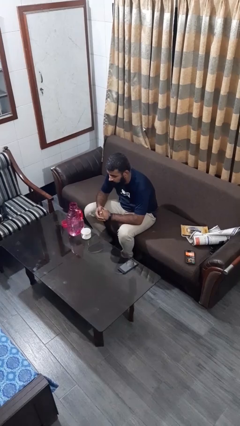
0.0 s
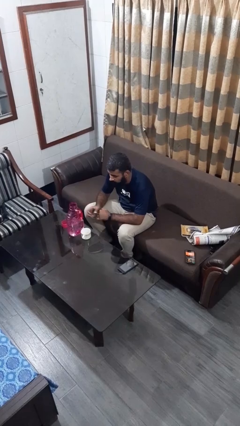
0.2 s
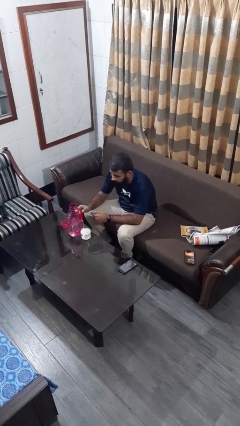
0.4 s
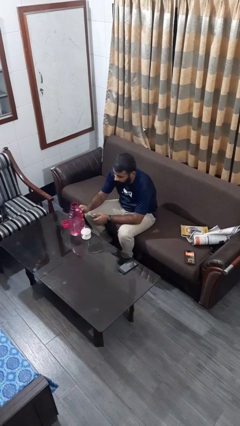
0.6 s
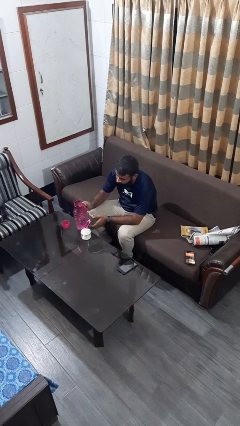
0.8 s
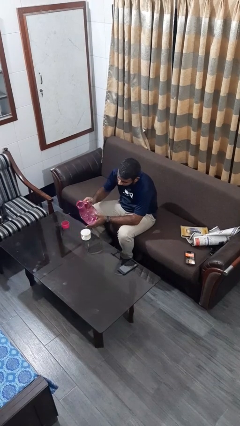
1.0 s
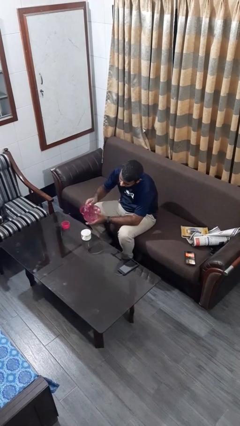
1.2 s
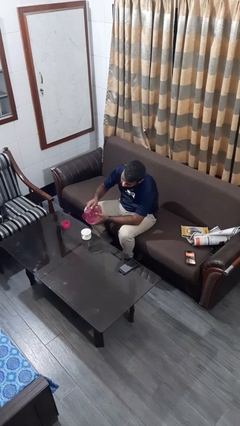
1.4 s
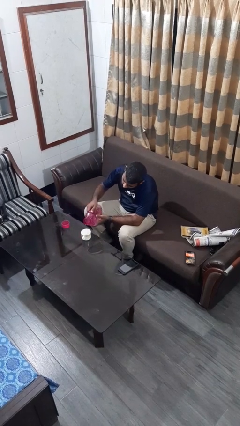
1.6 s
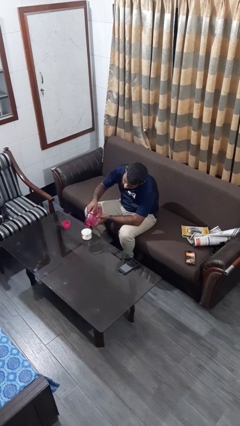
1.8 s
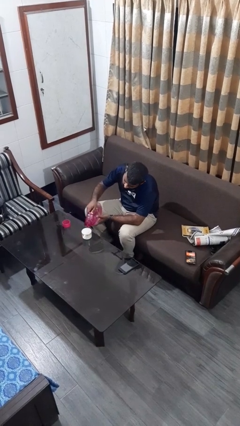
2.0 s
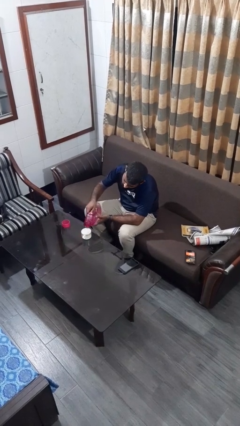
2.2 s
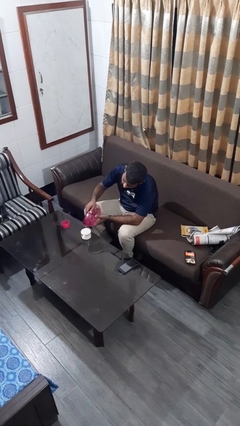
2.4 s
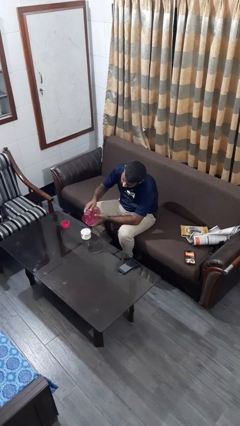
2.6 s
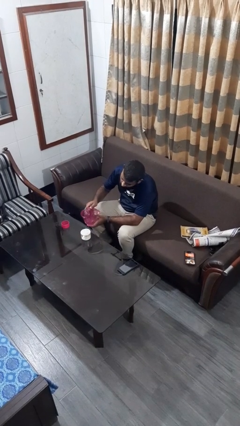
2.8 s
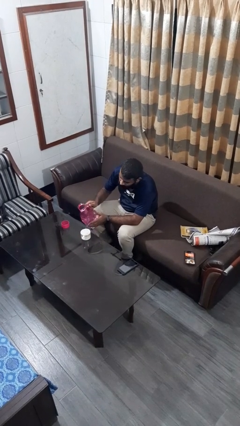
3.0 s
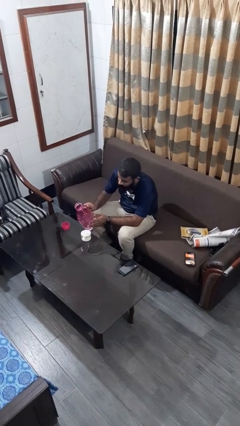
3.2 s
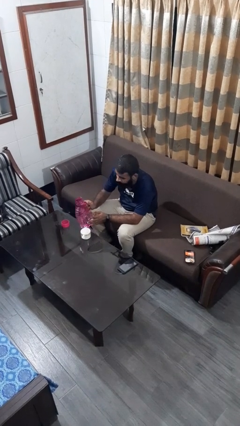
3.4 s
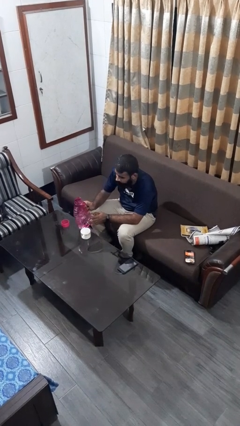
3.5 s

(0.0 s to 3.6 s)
person pours liquid into cup

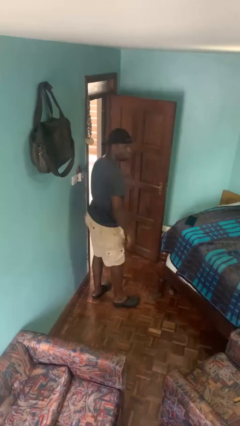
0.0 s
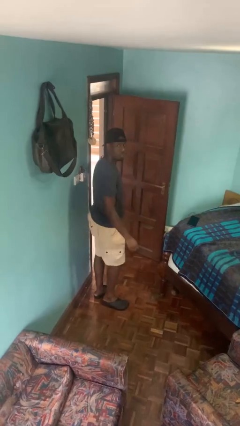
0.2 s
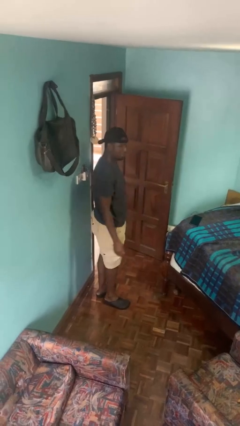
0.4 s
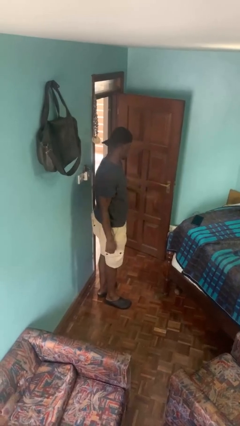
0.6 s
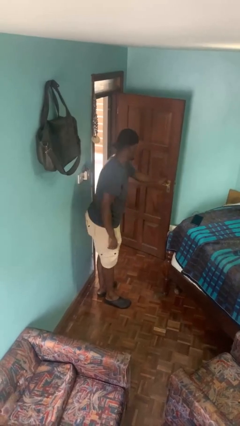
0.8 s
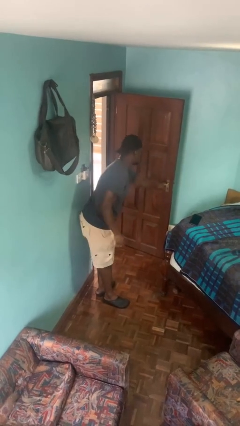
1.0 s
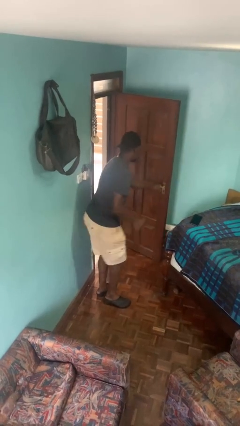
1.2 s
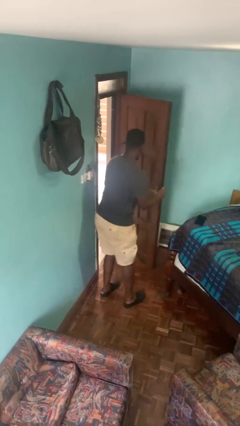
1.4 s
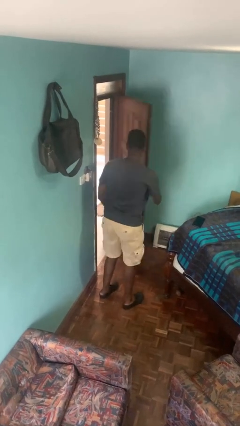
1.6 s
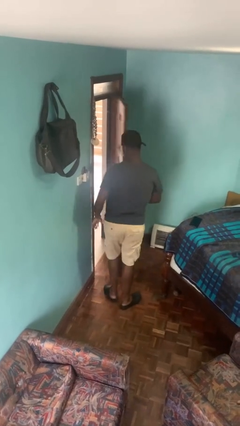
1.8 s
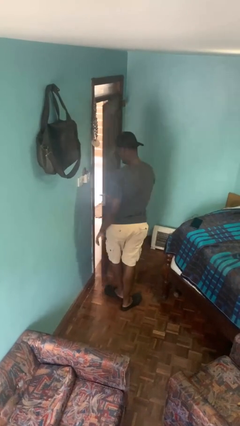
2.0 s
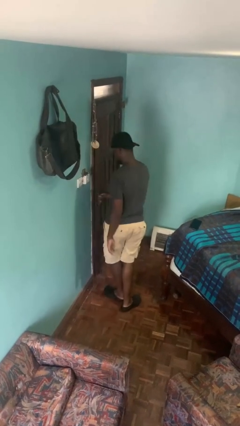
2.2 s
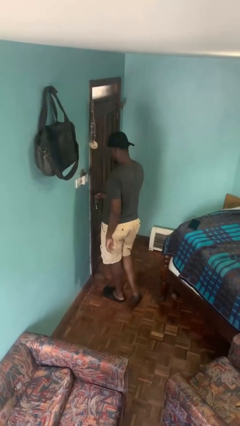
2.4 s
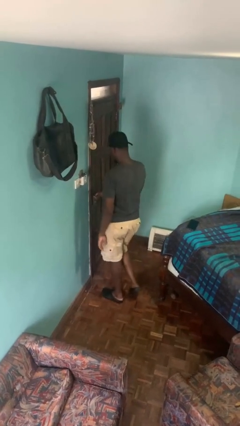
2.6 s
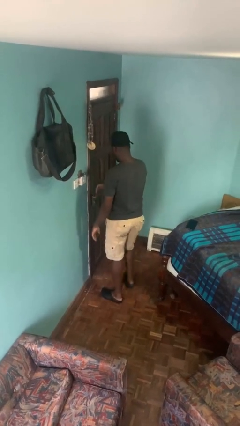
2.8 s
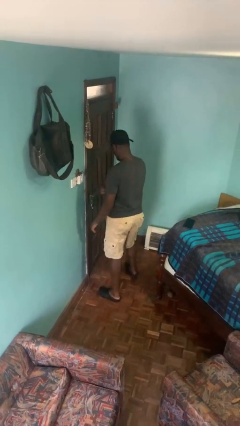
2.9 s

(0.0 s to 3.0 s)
person closes facility door

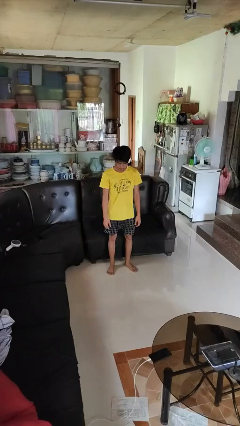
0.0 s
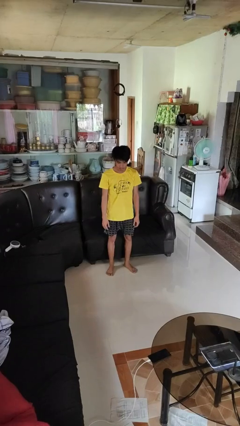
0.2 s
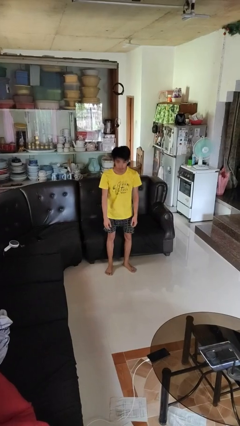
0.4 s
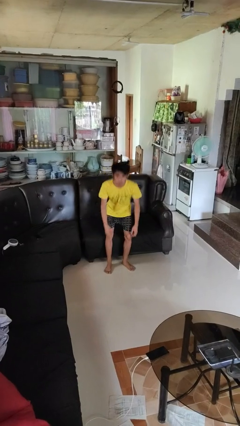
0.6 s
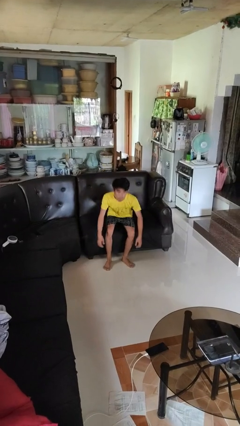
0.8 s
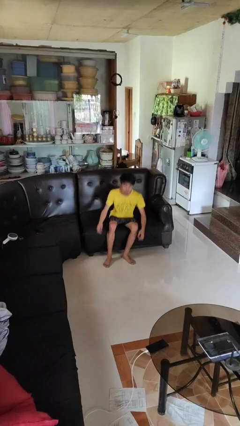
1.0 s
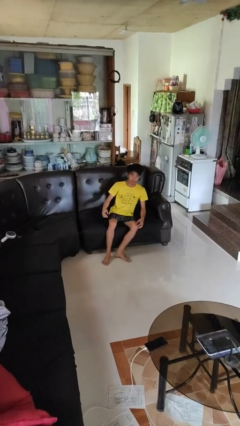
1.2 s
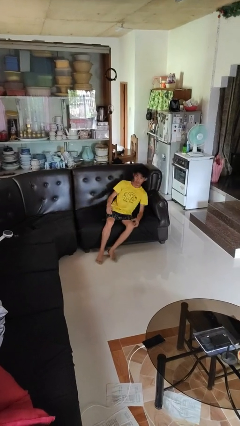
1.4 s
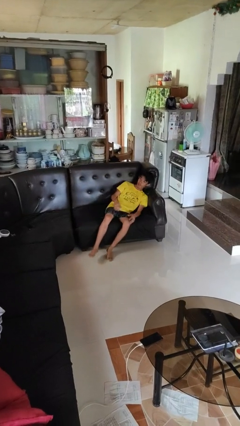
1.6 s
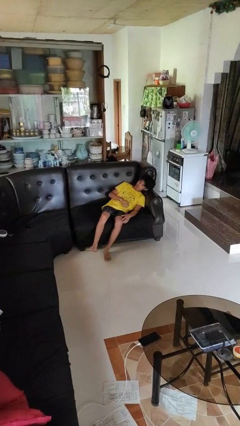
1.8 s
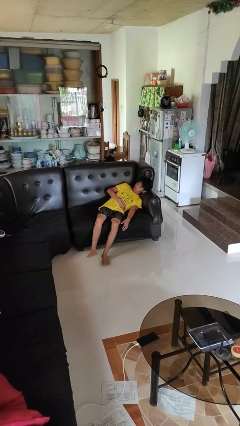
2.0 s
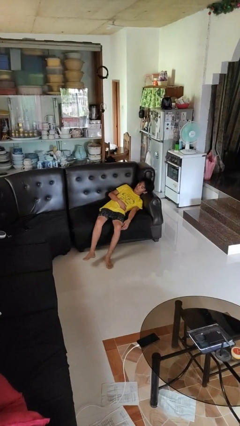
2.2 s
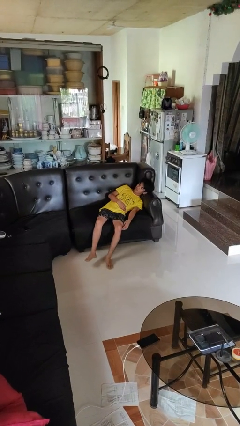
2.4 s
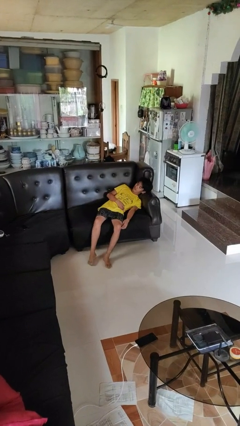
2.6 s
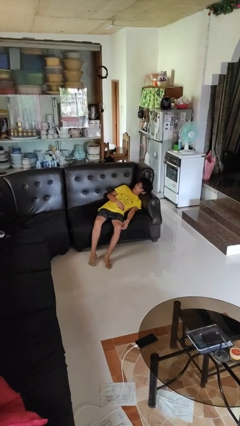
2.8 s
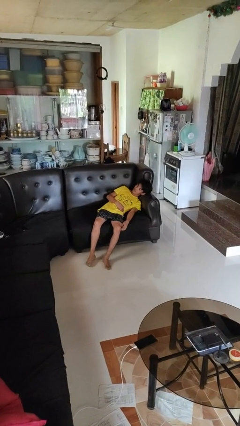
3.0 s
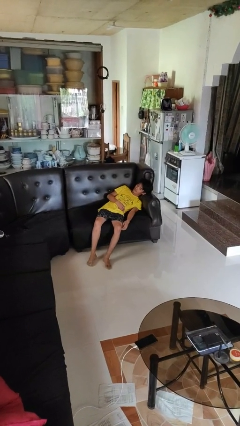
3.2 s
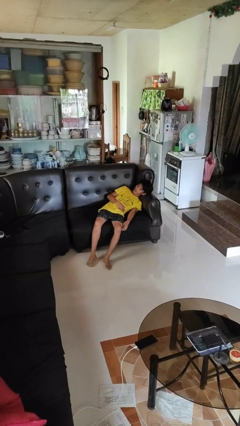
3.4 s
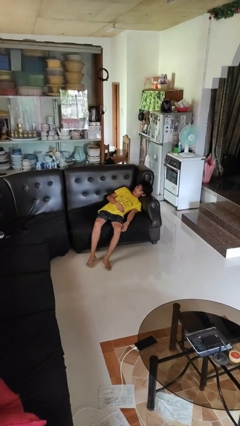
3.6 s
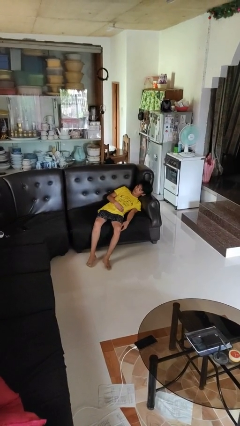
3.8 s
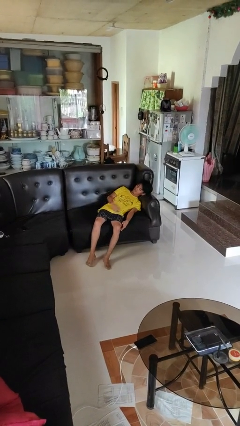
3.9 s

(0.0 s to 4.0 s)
person lies down on couch

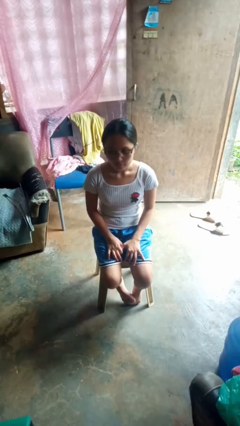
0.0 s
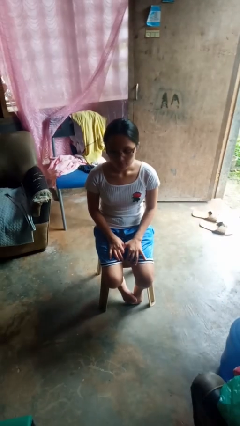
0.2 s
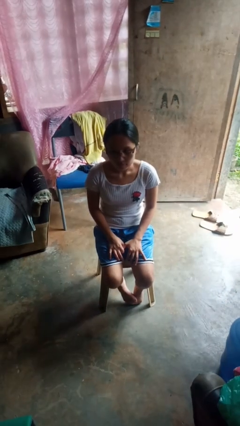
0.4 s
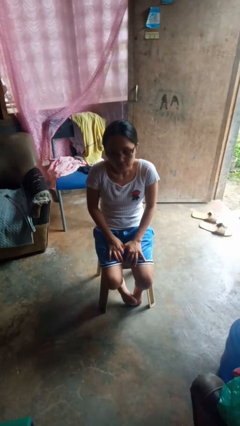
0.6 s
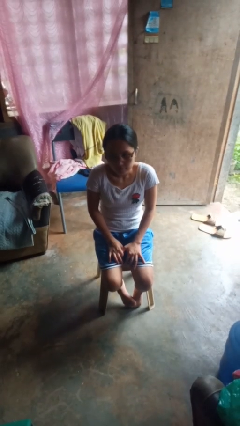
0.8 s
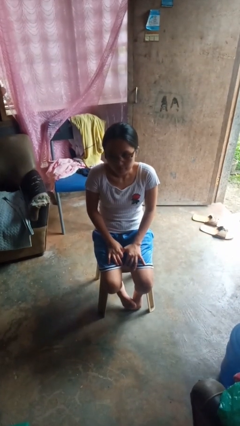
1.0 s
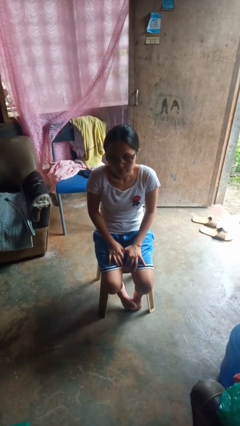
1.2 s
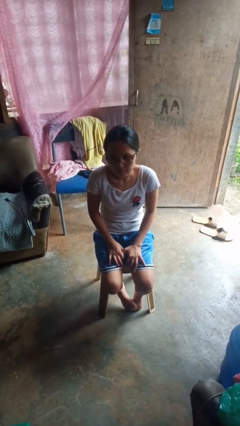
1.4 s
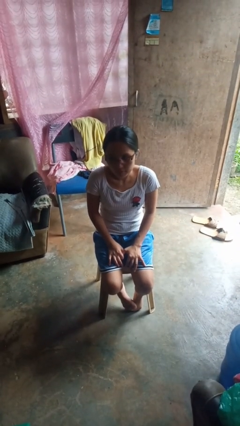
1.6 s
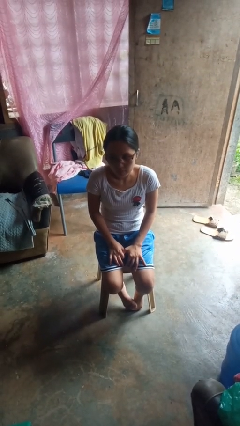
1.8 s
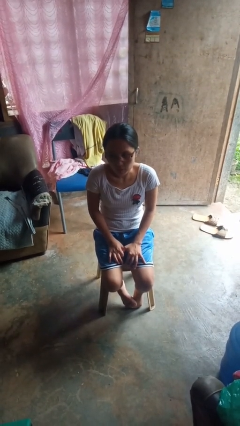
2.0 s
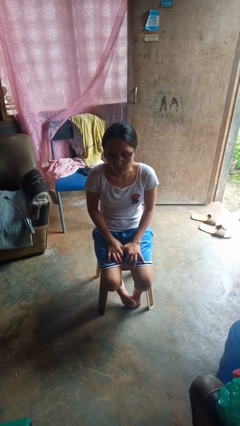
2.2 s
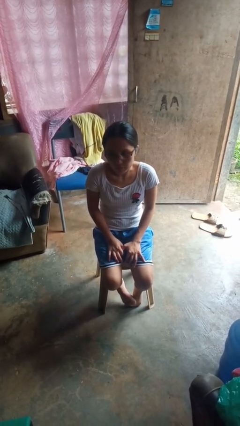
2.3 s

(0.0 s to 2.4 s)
person shrugs

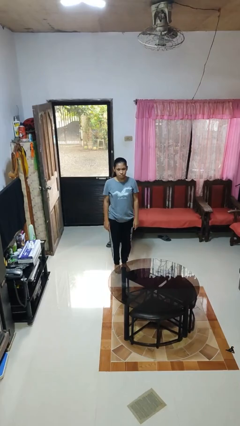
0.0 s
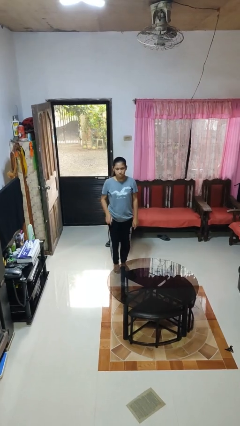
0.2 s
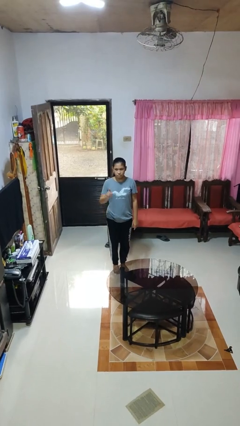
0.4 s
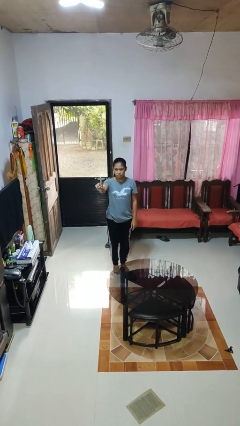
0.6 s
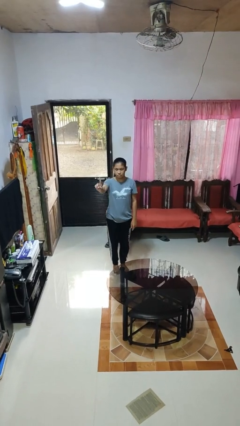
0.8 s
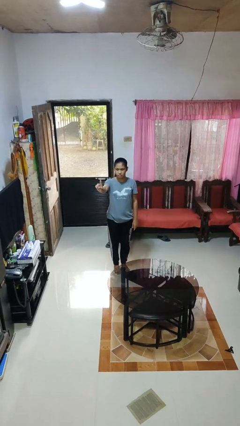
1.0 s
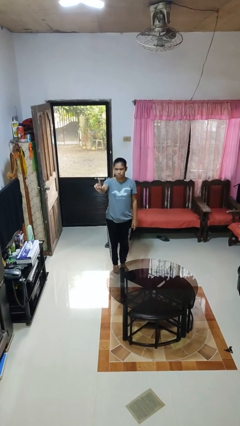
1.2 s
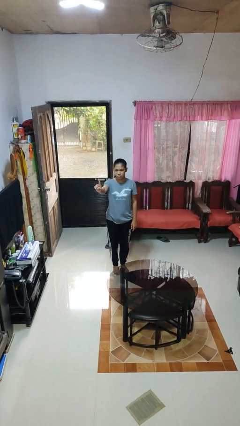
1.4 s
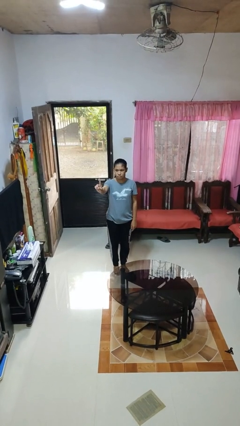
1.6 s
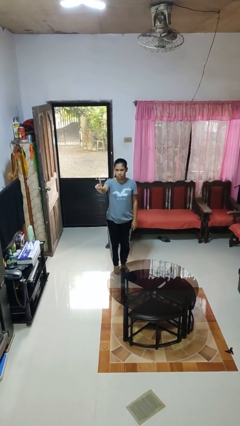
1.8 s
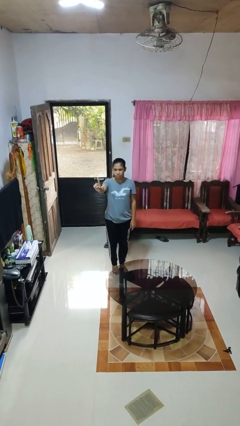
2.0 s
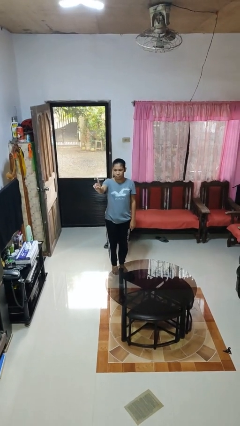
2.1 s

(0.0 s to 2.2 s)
person gestures number one

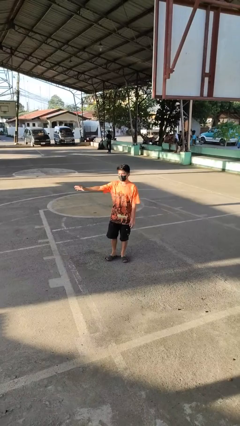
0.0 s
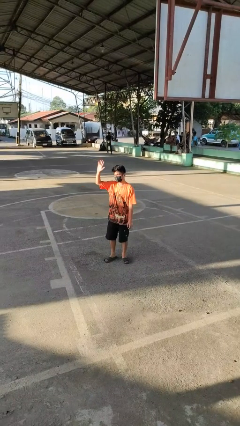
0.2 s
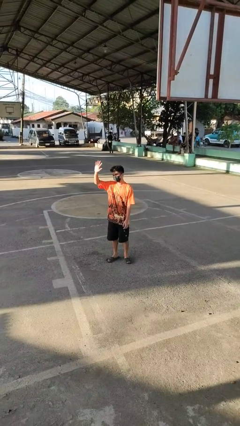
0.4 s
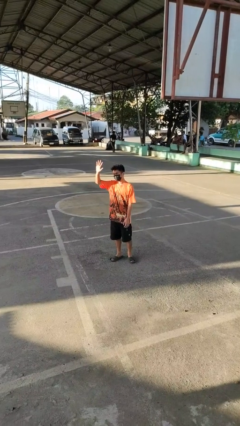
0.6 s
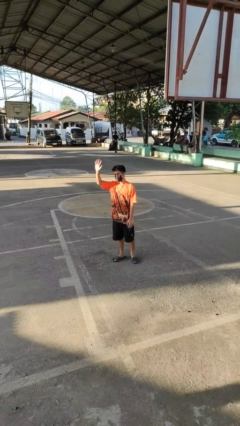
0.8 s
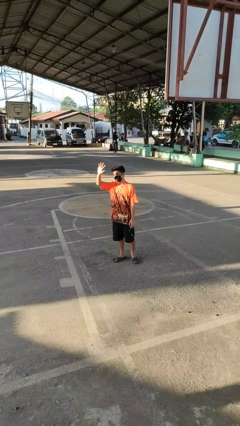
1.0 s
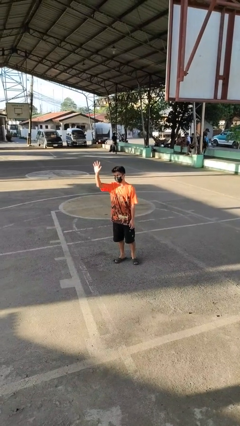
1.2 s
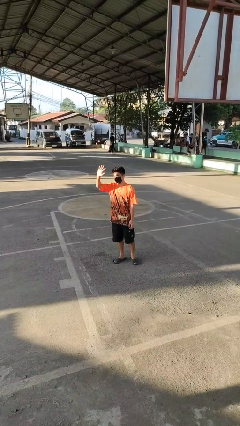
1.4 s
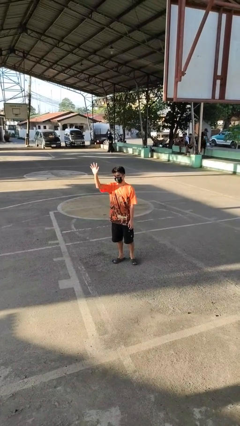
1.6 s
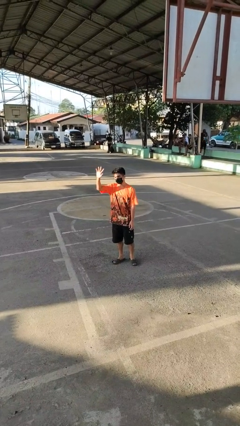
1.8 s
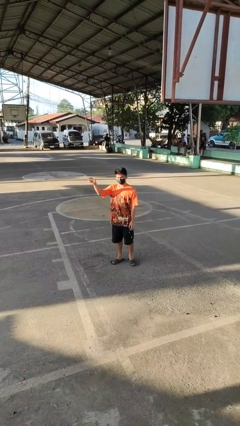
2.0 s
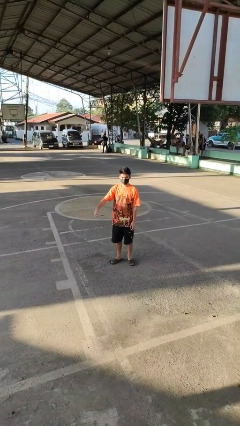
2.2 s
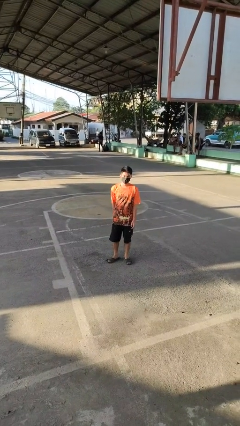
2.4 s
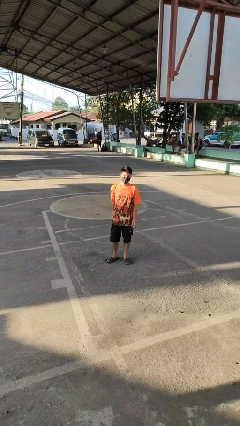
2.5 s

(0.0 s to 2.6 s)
person waves at person
